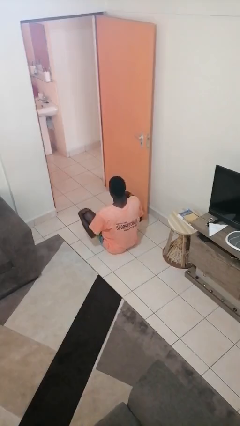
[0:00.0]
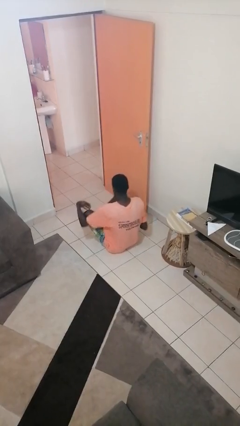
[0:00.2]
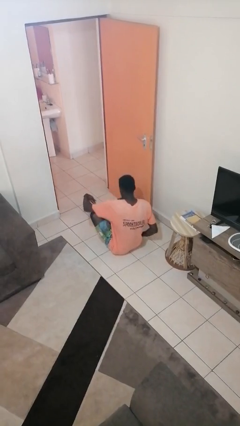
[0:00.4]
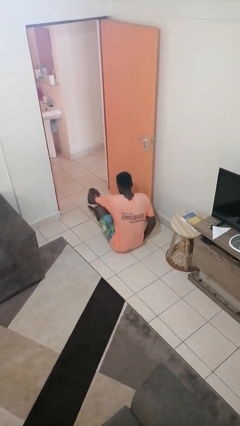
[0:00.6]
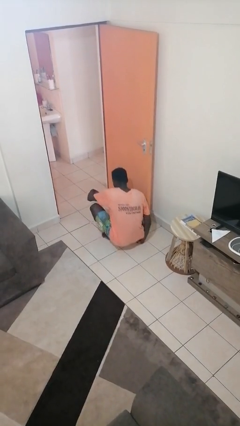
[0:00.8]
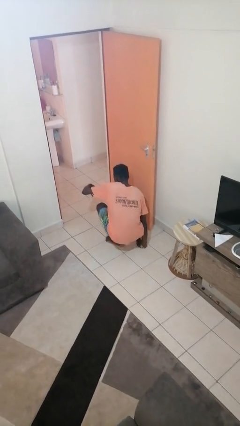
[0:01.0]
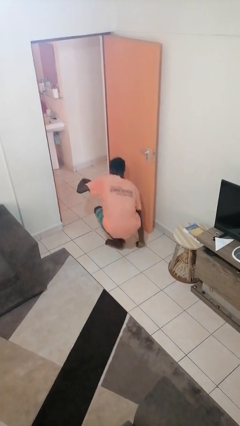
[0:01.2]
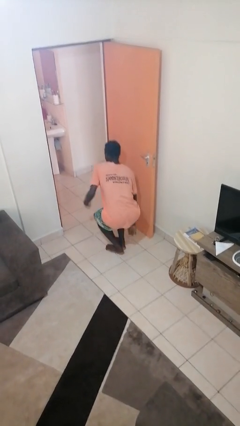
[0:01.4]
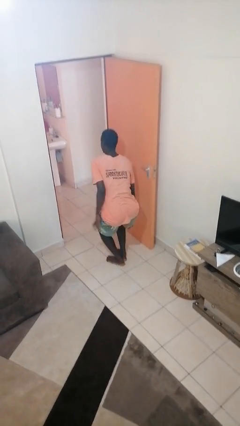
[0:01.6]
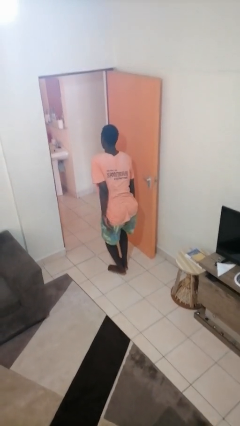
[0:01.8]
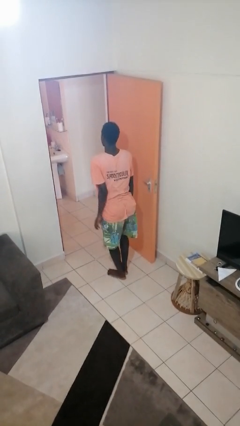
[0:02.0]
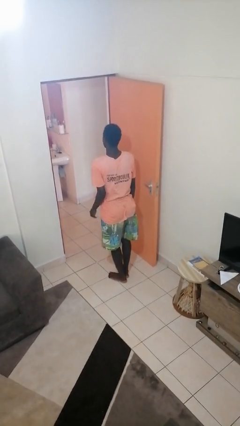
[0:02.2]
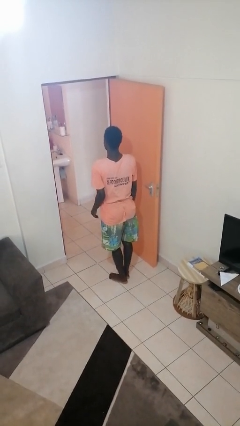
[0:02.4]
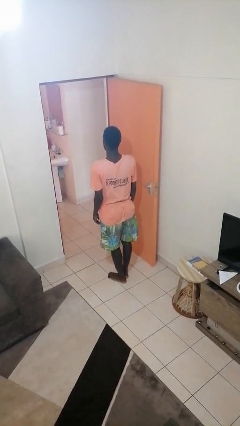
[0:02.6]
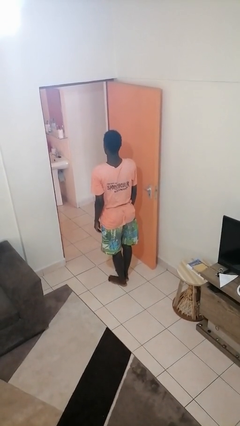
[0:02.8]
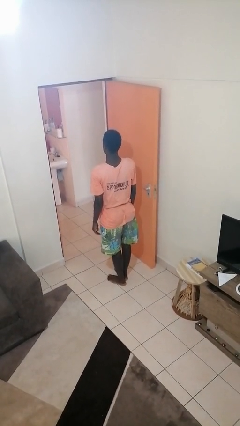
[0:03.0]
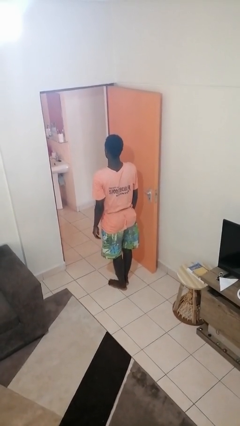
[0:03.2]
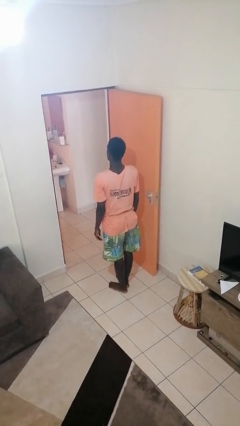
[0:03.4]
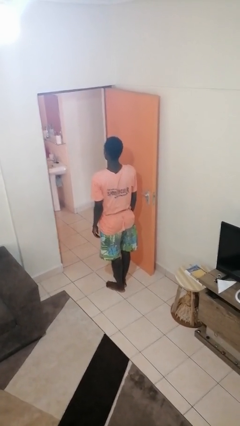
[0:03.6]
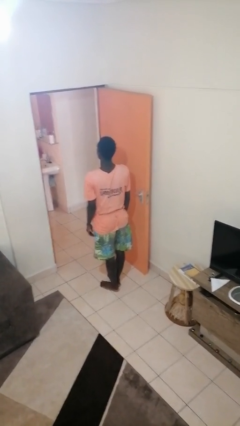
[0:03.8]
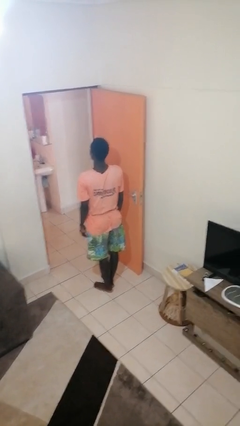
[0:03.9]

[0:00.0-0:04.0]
person stands up from floor

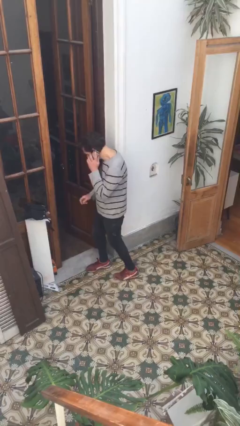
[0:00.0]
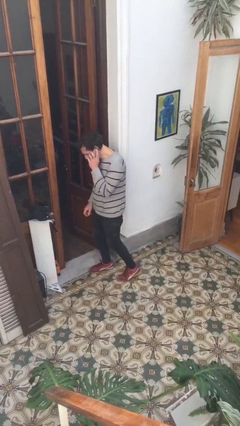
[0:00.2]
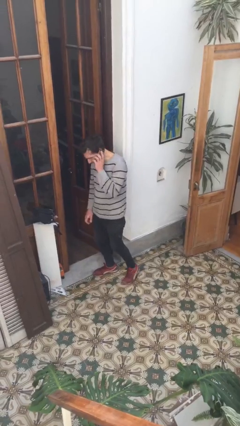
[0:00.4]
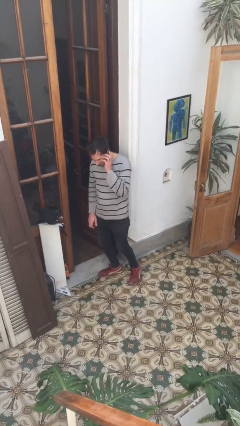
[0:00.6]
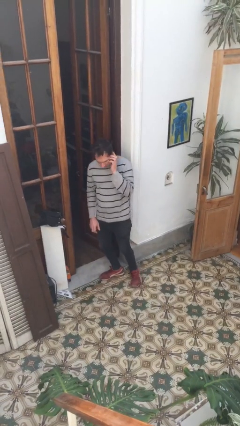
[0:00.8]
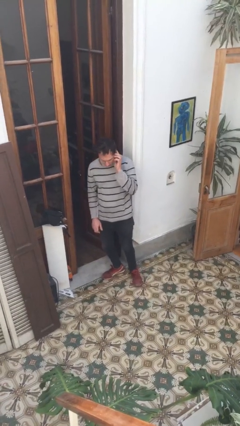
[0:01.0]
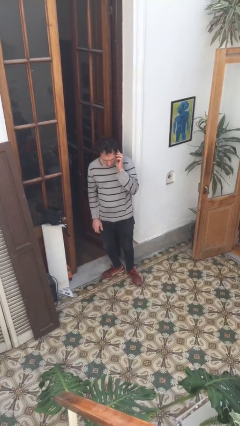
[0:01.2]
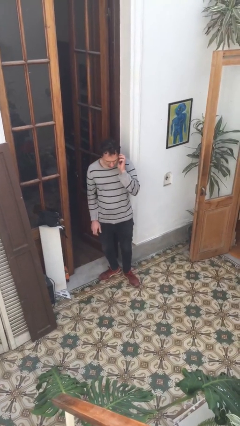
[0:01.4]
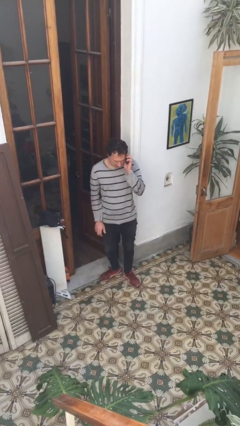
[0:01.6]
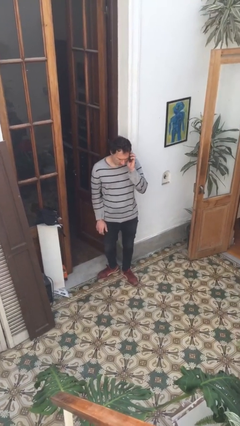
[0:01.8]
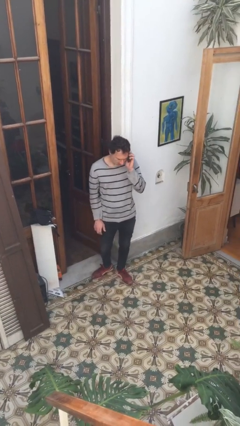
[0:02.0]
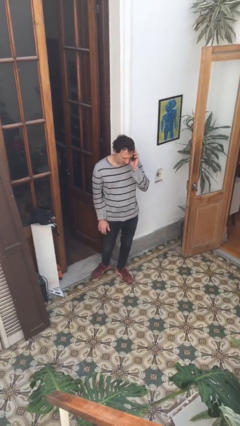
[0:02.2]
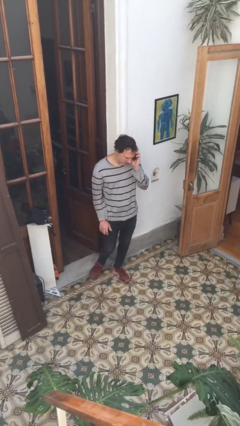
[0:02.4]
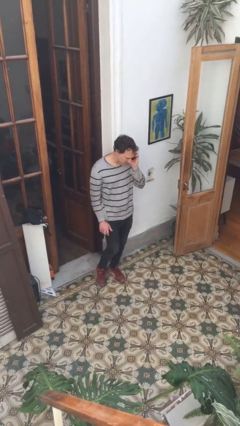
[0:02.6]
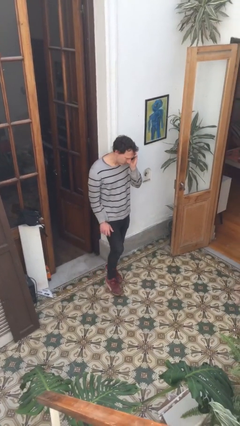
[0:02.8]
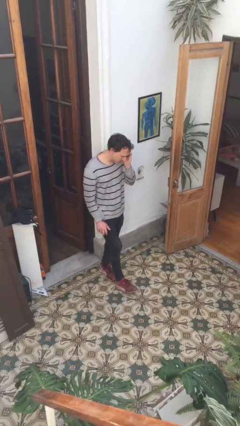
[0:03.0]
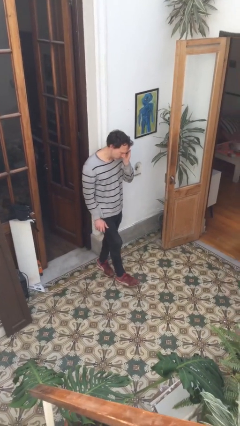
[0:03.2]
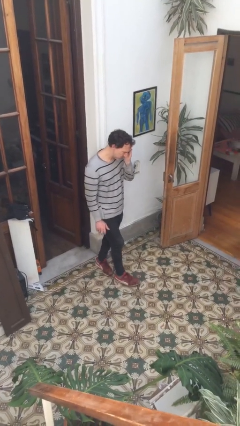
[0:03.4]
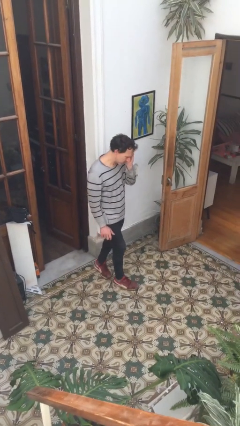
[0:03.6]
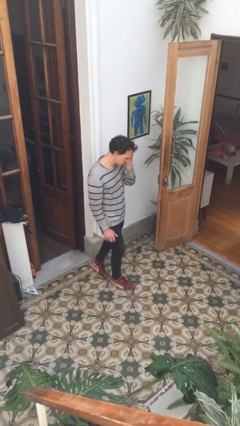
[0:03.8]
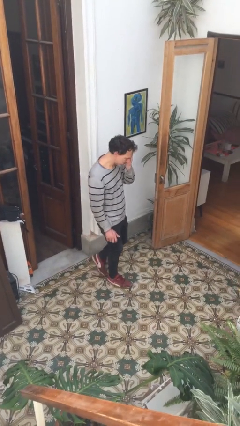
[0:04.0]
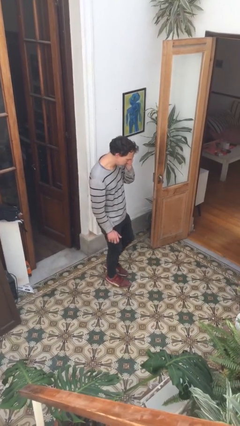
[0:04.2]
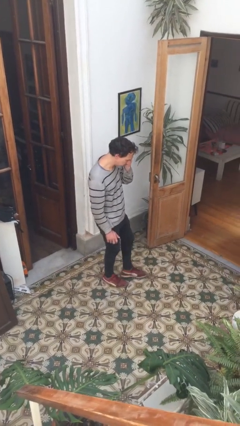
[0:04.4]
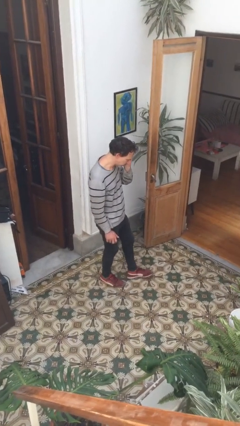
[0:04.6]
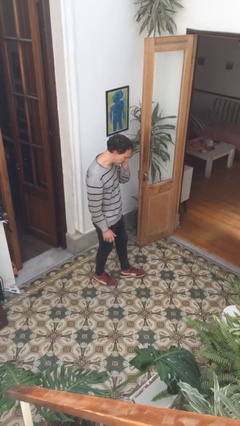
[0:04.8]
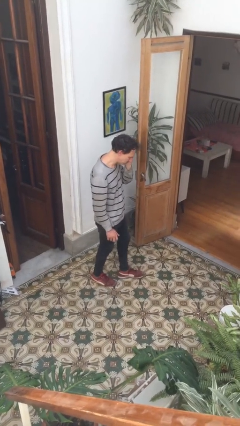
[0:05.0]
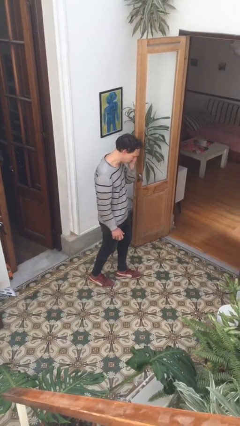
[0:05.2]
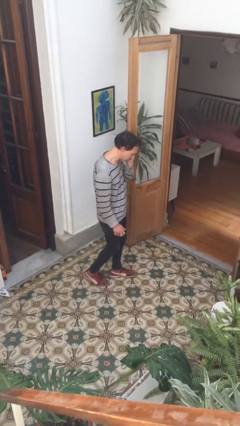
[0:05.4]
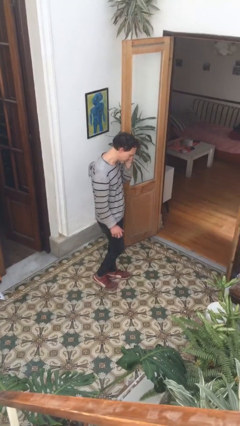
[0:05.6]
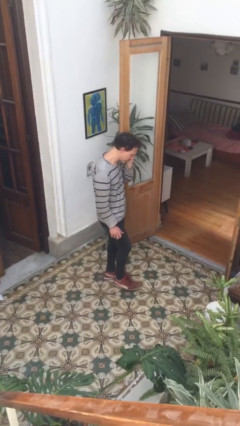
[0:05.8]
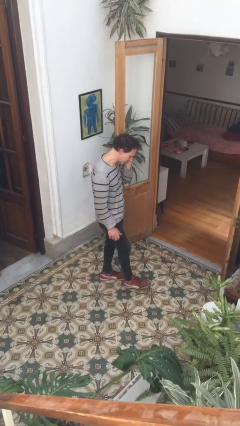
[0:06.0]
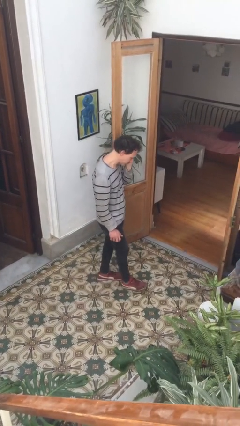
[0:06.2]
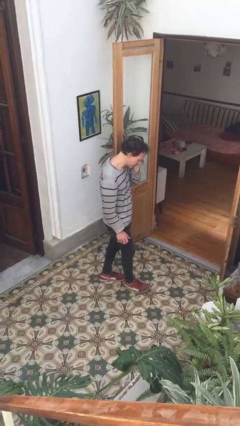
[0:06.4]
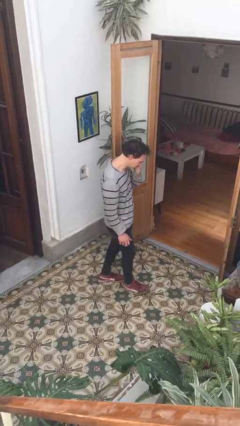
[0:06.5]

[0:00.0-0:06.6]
person talks on phone

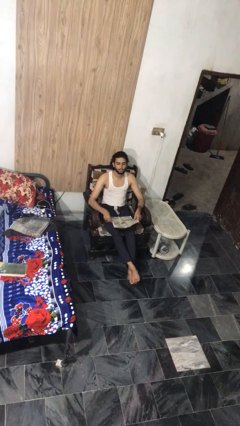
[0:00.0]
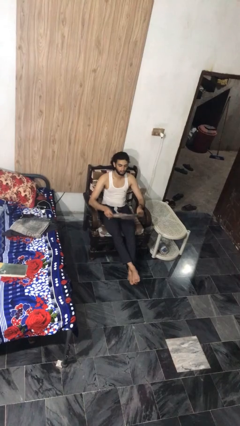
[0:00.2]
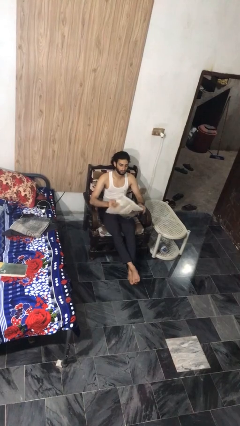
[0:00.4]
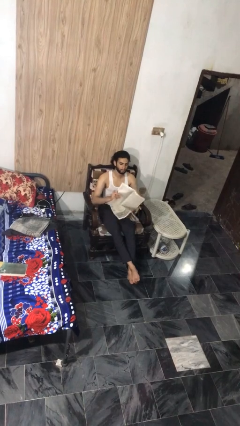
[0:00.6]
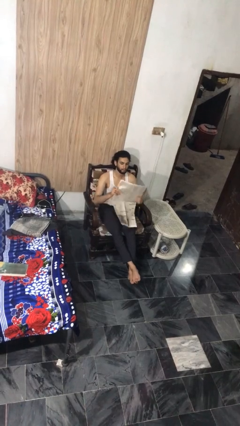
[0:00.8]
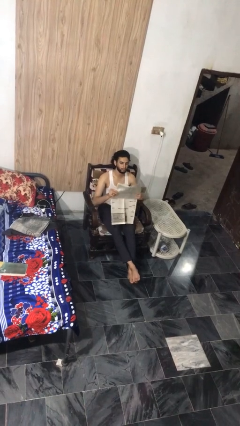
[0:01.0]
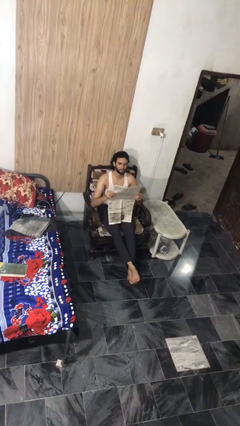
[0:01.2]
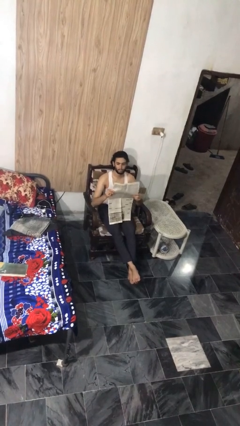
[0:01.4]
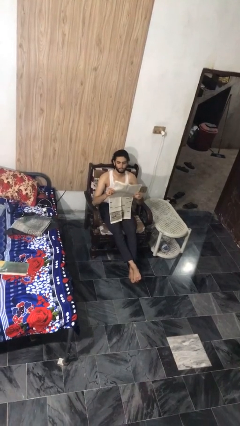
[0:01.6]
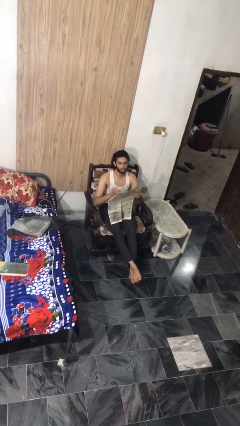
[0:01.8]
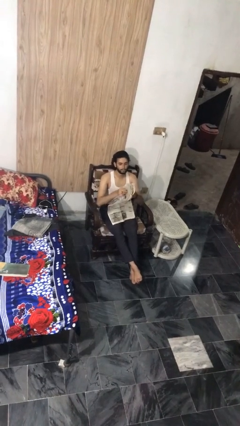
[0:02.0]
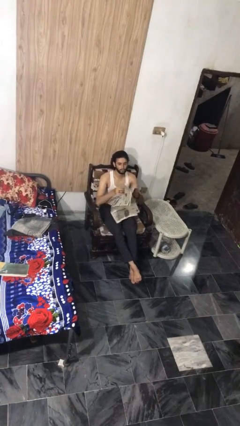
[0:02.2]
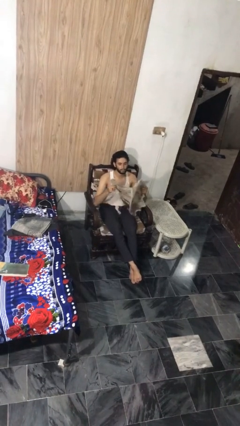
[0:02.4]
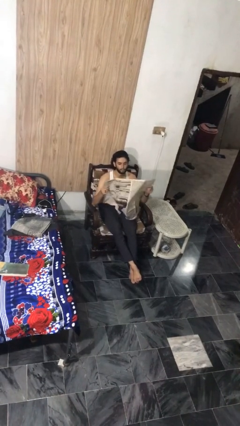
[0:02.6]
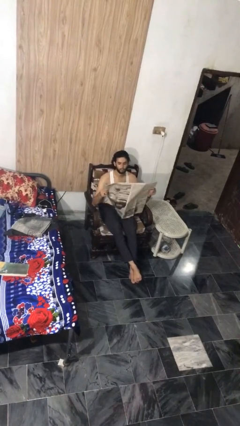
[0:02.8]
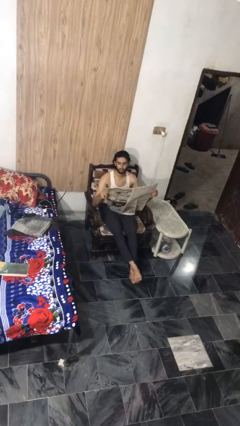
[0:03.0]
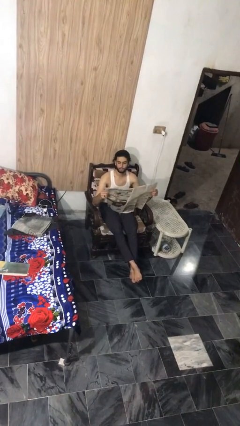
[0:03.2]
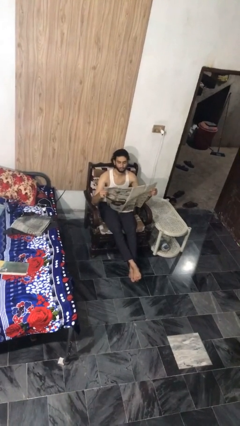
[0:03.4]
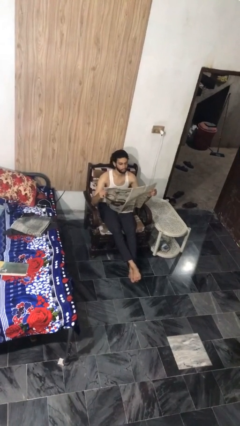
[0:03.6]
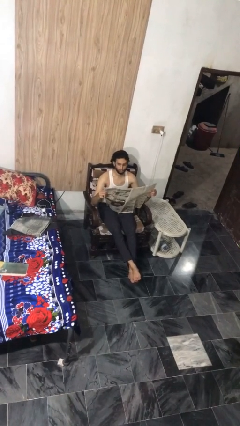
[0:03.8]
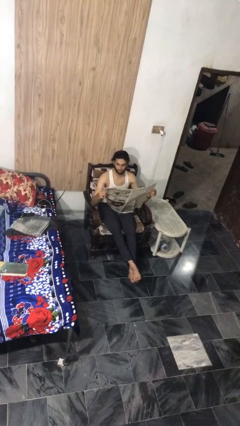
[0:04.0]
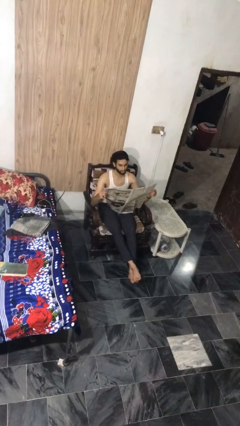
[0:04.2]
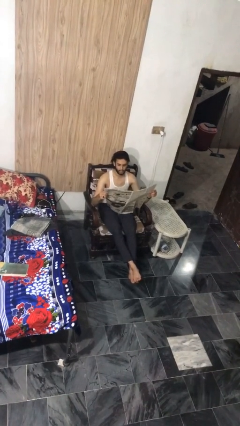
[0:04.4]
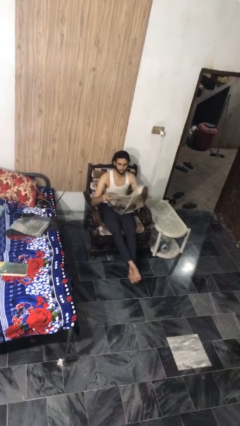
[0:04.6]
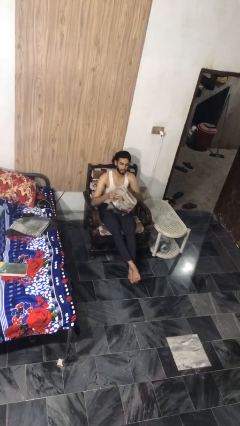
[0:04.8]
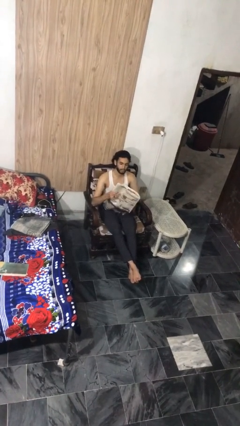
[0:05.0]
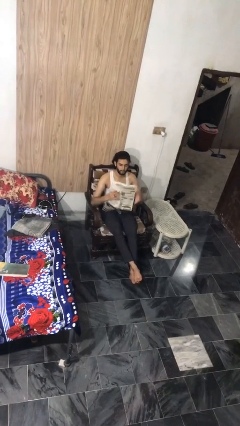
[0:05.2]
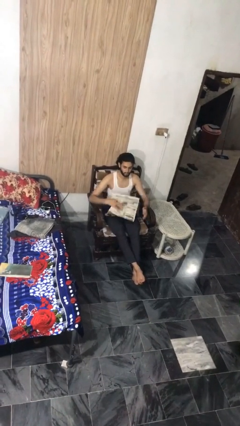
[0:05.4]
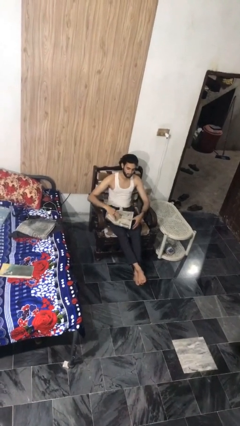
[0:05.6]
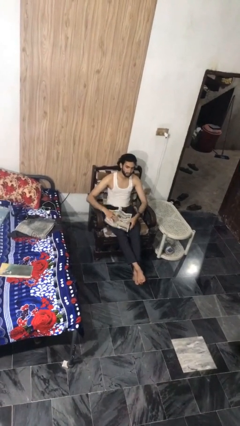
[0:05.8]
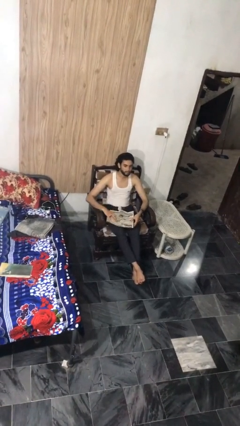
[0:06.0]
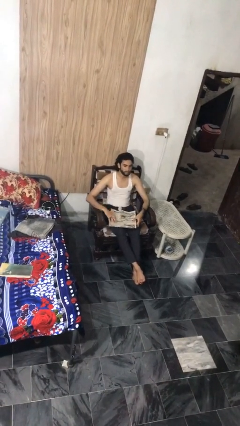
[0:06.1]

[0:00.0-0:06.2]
person reads newspaper

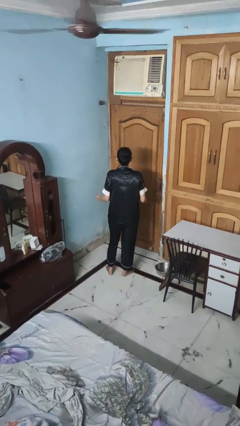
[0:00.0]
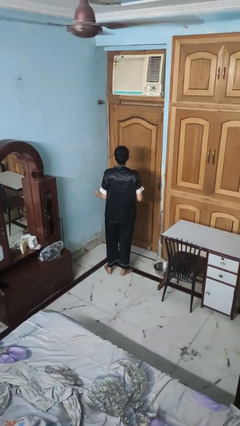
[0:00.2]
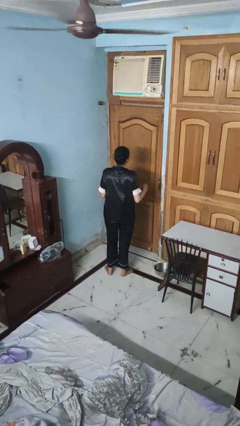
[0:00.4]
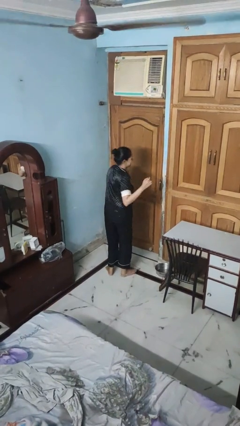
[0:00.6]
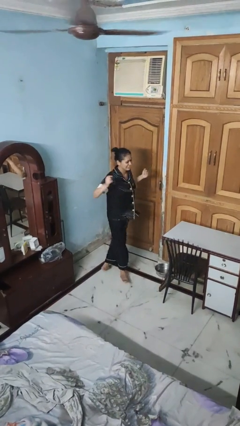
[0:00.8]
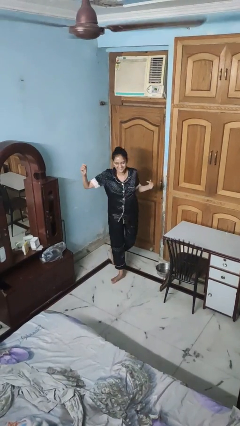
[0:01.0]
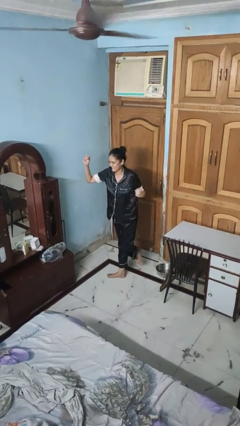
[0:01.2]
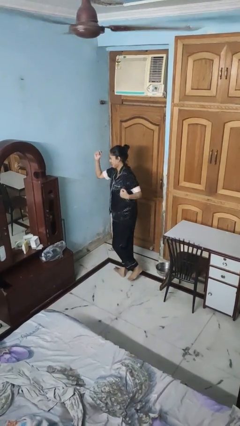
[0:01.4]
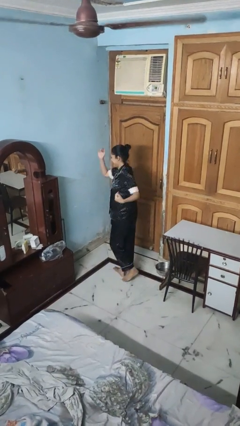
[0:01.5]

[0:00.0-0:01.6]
person twirls
